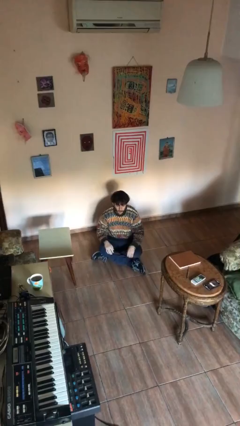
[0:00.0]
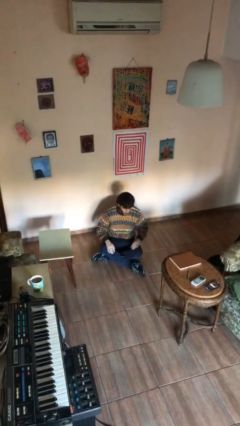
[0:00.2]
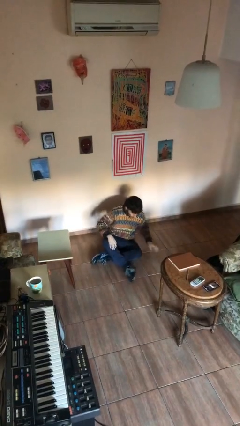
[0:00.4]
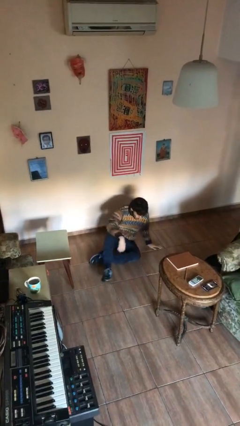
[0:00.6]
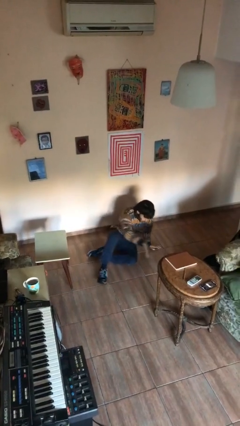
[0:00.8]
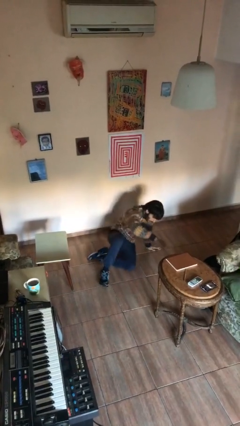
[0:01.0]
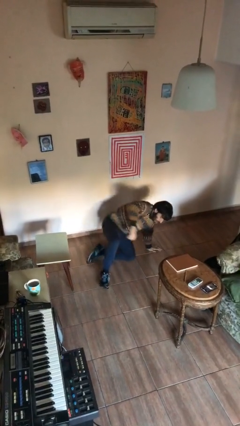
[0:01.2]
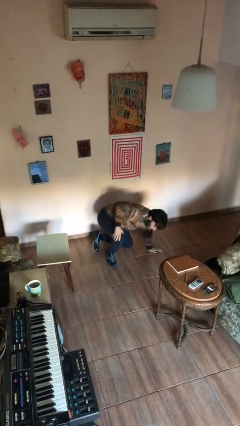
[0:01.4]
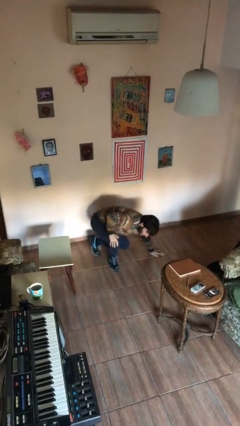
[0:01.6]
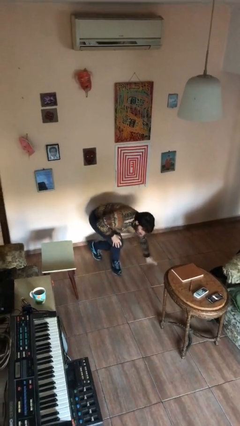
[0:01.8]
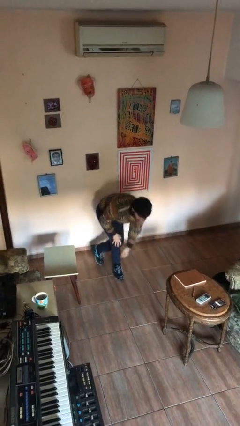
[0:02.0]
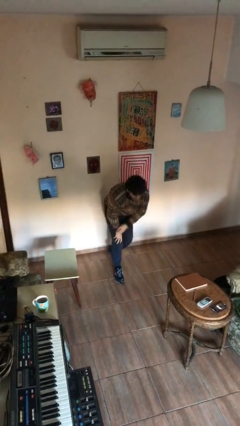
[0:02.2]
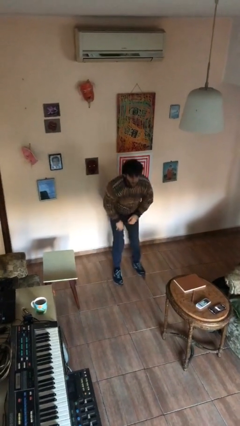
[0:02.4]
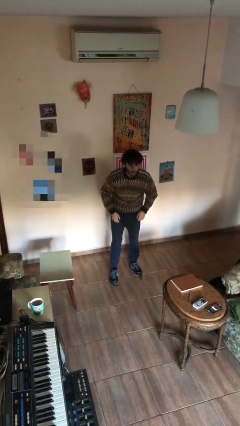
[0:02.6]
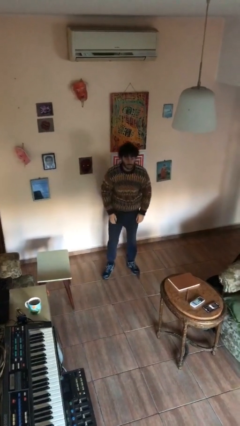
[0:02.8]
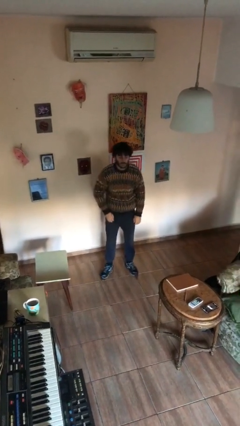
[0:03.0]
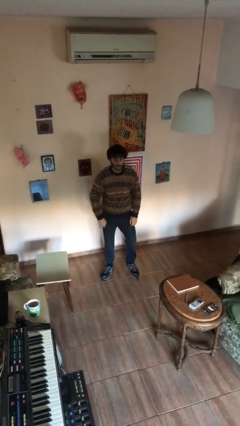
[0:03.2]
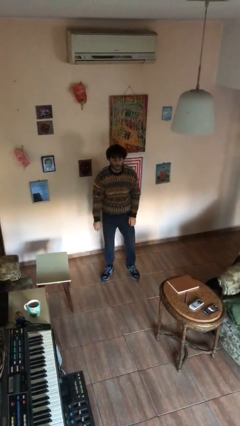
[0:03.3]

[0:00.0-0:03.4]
person stands up from floor

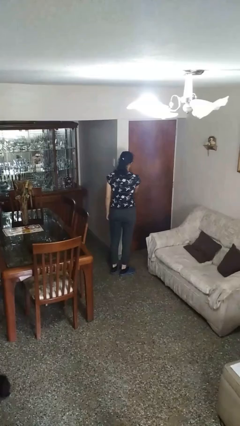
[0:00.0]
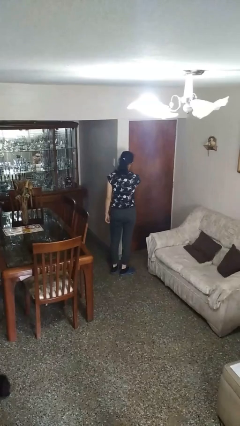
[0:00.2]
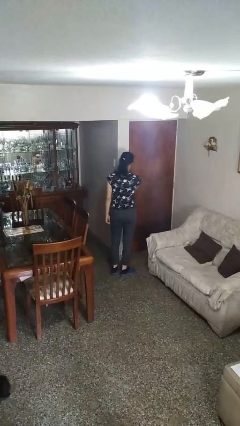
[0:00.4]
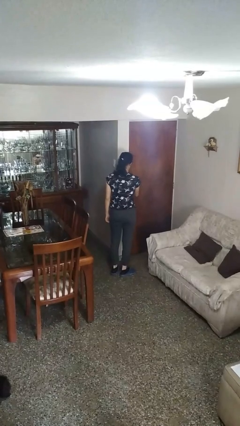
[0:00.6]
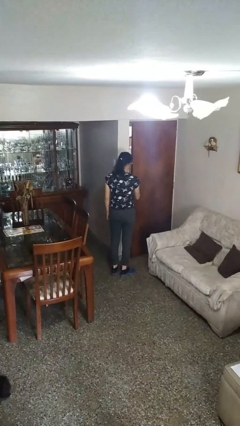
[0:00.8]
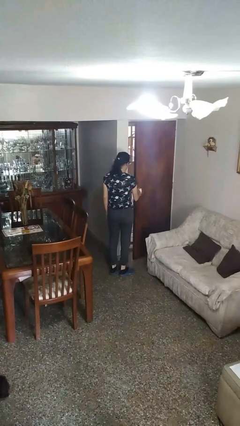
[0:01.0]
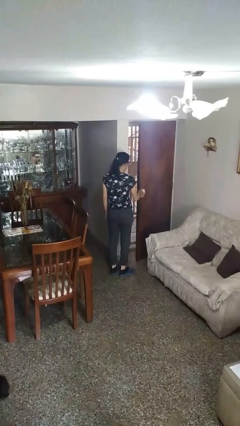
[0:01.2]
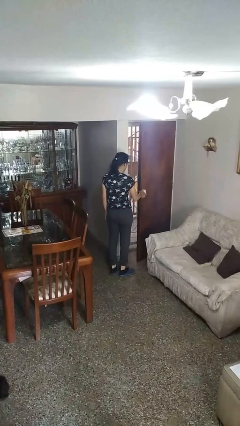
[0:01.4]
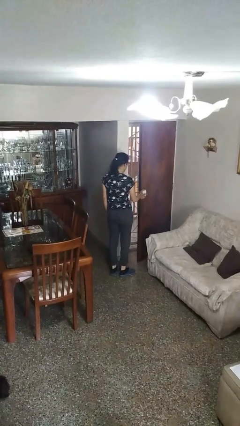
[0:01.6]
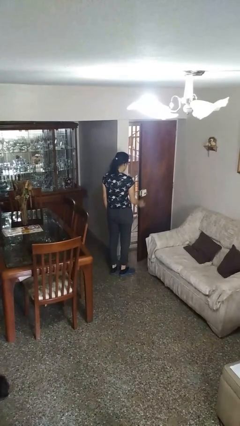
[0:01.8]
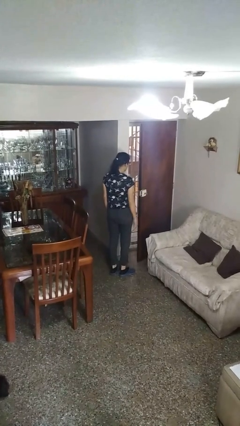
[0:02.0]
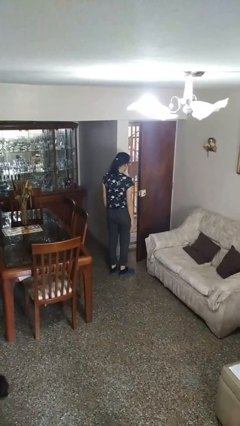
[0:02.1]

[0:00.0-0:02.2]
person opens facility door

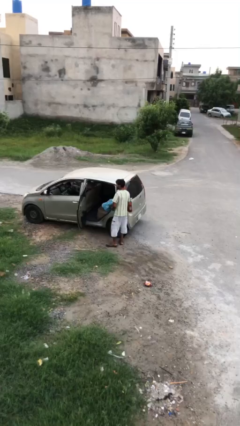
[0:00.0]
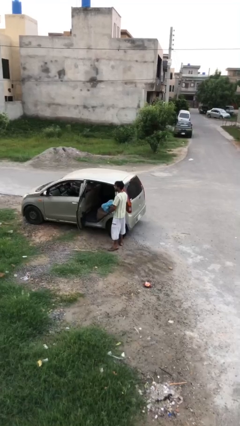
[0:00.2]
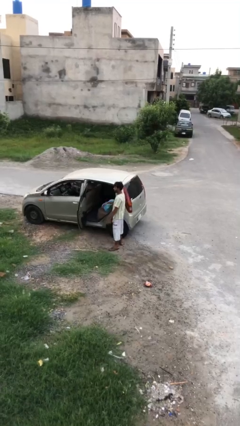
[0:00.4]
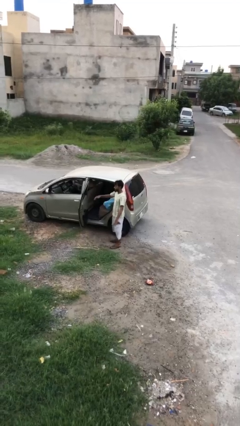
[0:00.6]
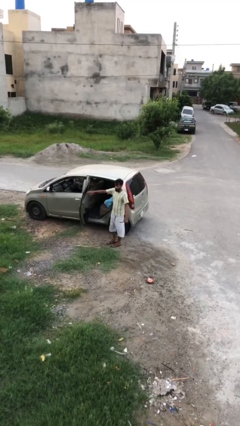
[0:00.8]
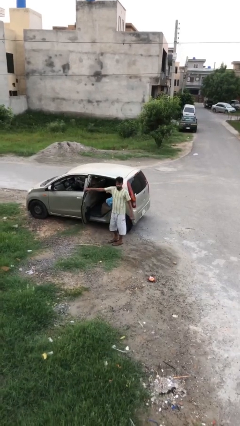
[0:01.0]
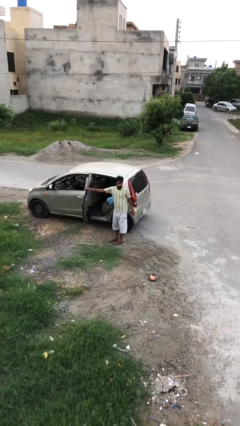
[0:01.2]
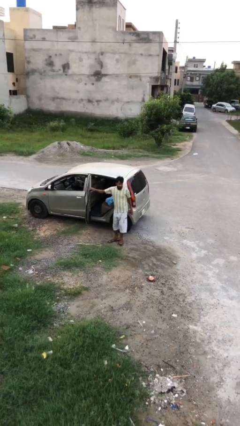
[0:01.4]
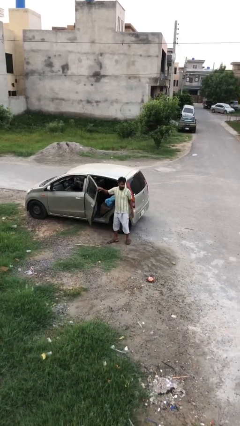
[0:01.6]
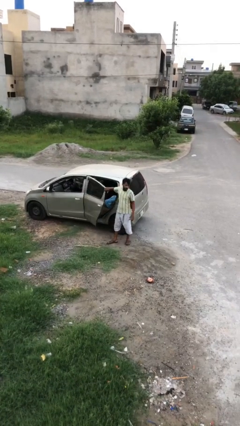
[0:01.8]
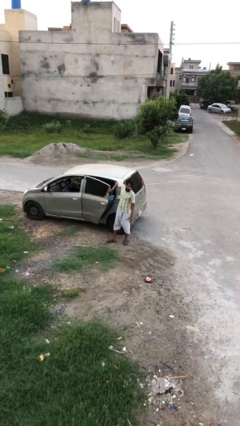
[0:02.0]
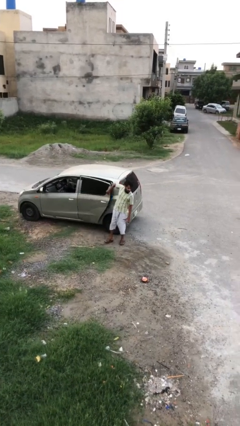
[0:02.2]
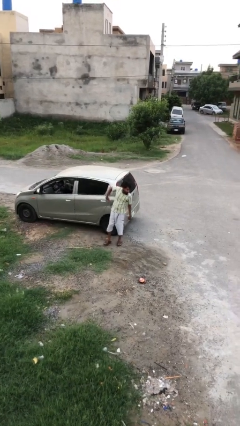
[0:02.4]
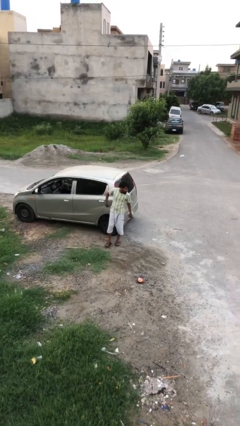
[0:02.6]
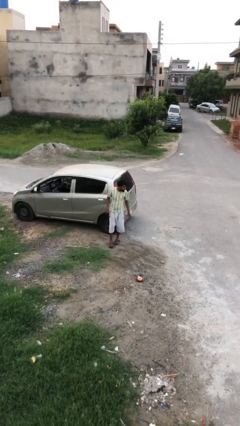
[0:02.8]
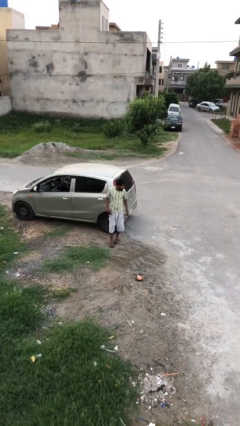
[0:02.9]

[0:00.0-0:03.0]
person closes car door

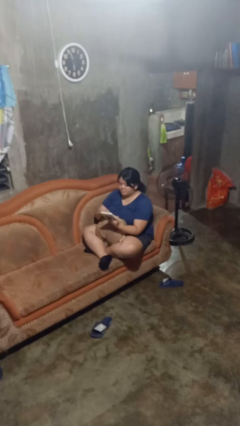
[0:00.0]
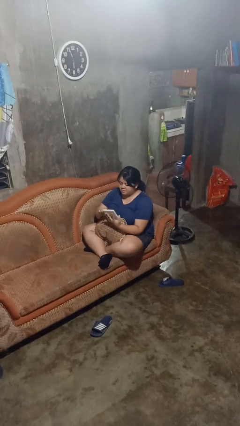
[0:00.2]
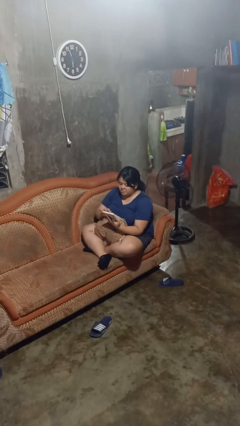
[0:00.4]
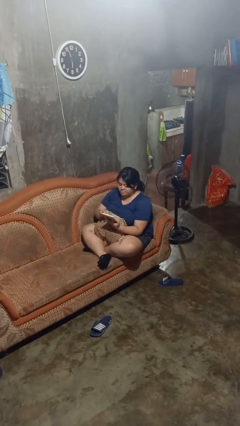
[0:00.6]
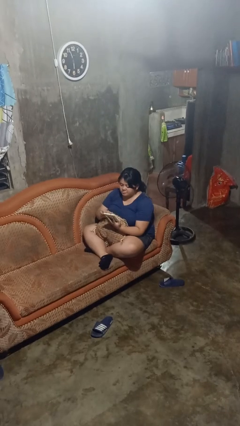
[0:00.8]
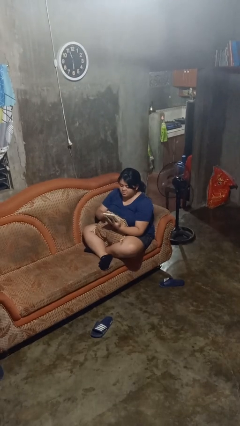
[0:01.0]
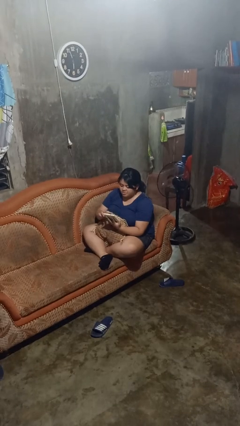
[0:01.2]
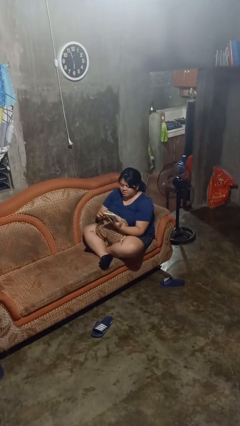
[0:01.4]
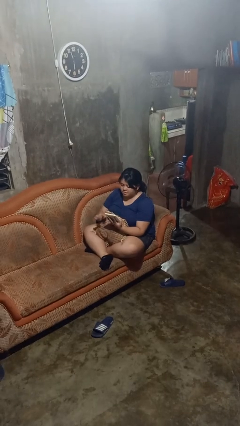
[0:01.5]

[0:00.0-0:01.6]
person interacts with tablet

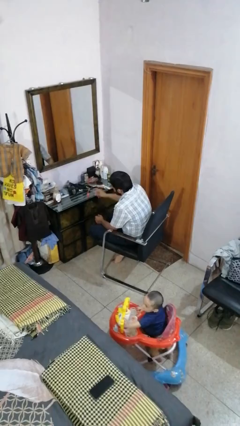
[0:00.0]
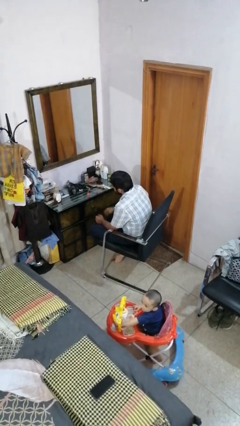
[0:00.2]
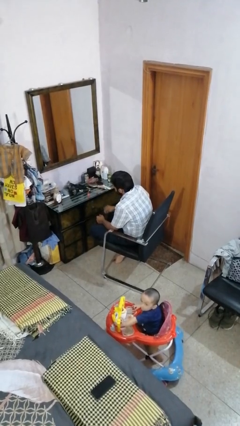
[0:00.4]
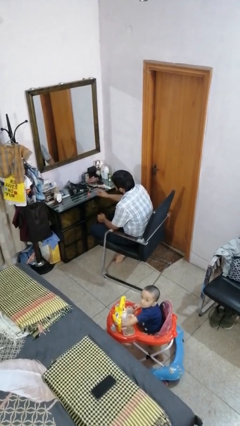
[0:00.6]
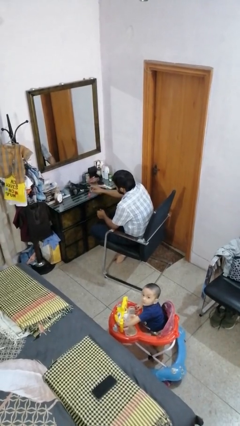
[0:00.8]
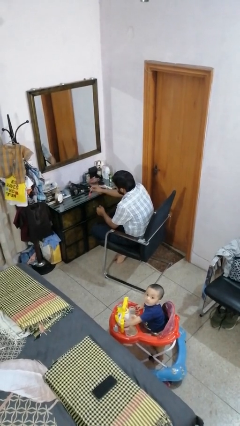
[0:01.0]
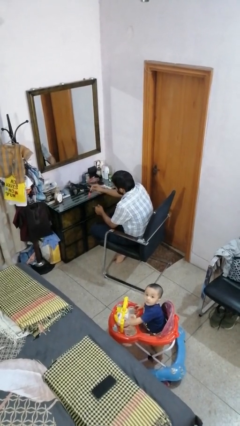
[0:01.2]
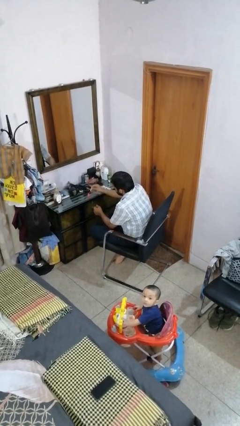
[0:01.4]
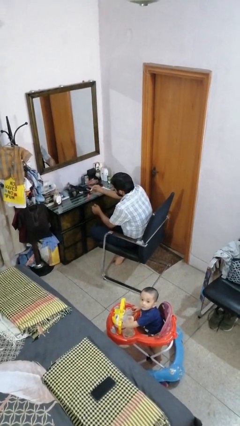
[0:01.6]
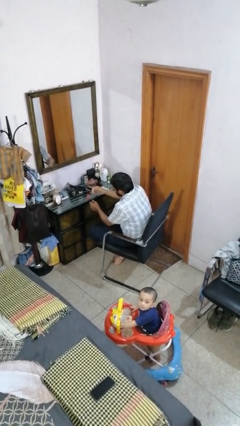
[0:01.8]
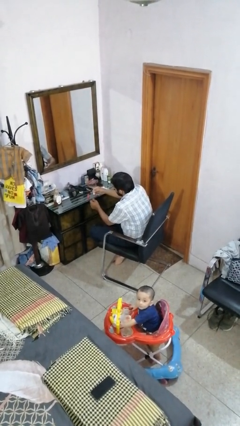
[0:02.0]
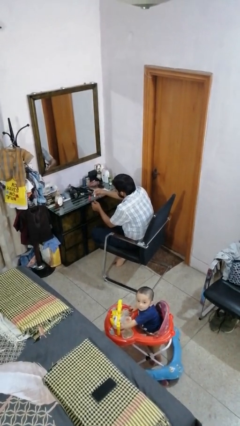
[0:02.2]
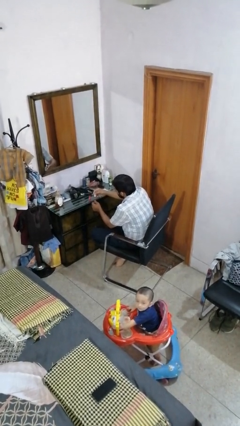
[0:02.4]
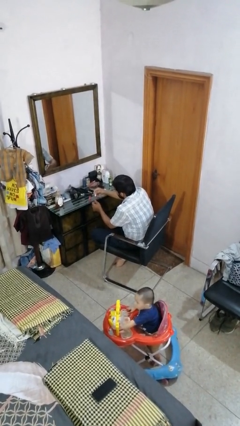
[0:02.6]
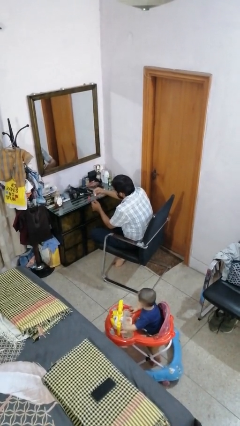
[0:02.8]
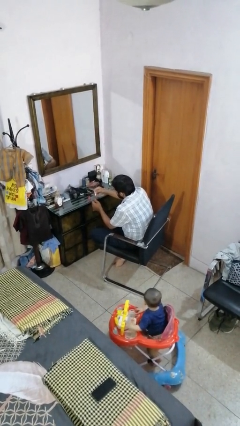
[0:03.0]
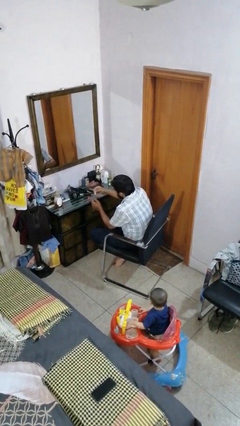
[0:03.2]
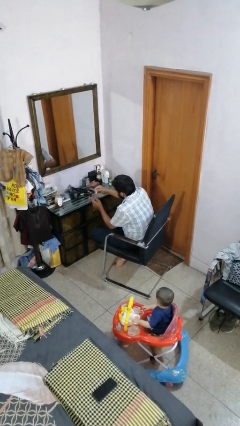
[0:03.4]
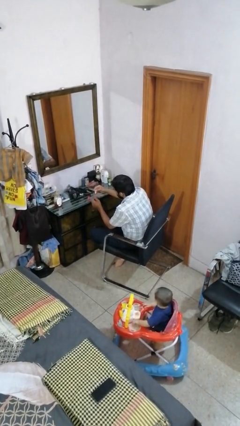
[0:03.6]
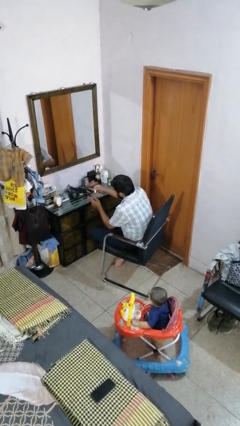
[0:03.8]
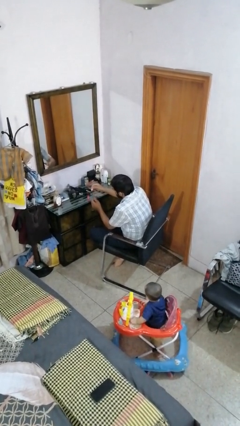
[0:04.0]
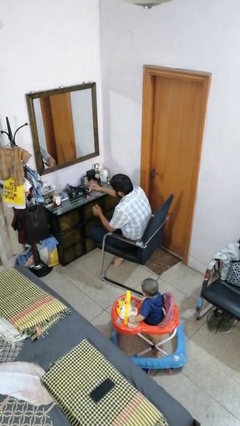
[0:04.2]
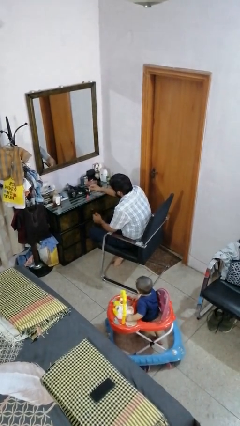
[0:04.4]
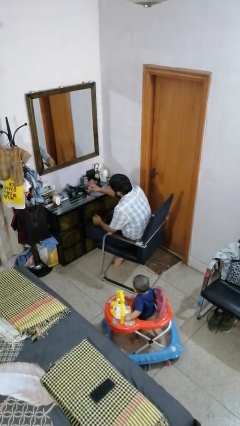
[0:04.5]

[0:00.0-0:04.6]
person paints fingernails

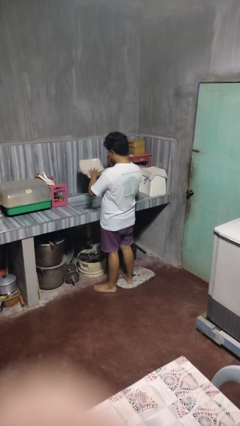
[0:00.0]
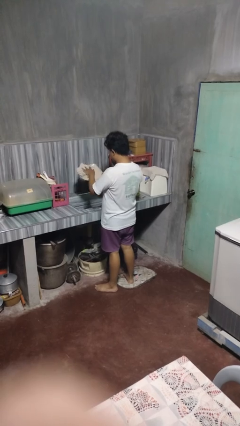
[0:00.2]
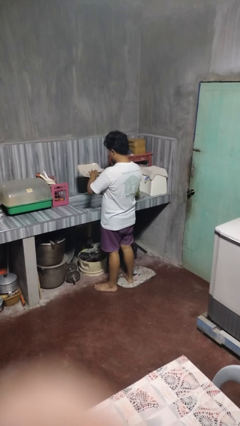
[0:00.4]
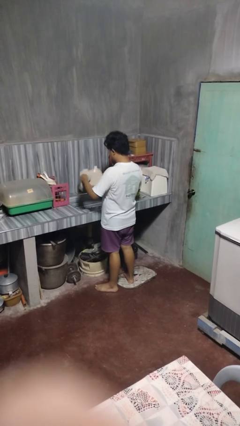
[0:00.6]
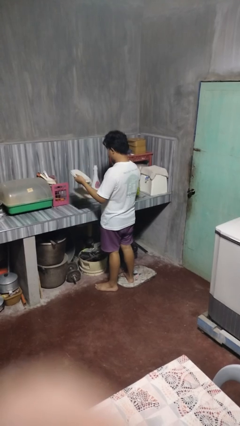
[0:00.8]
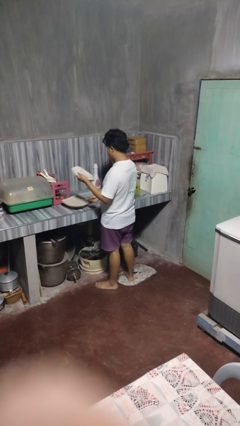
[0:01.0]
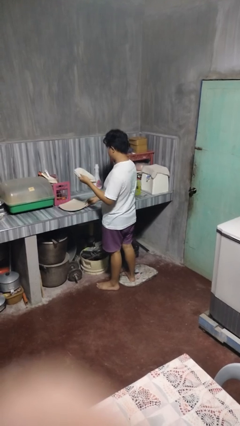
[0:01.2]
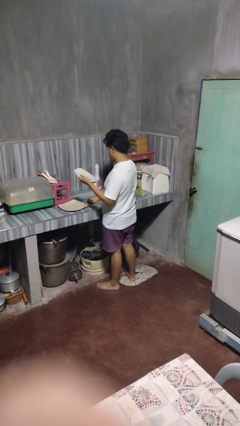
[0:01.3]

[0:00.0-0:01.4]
person dries dish

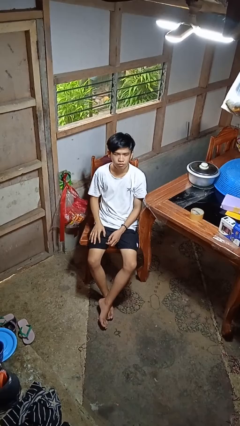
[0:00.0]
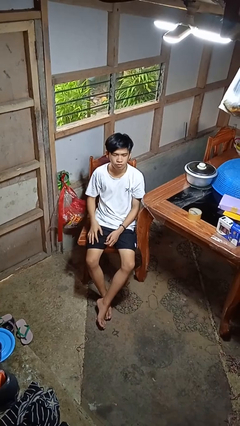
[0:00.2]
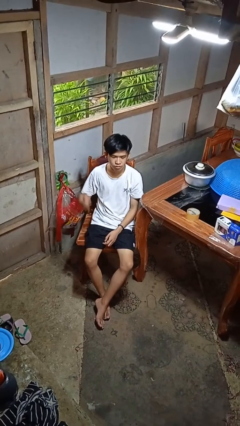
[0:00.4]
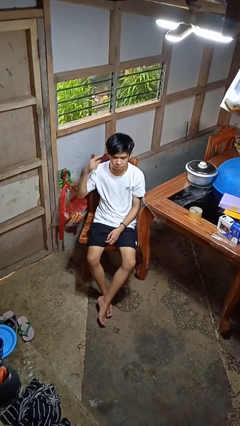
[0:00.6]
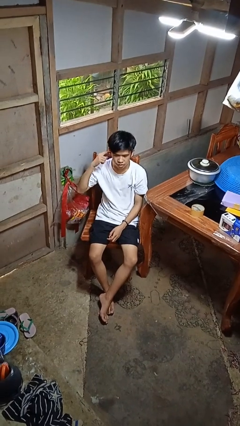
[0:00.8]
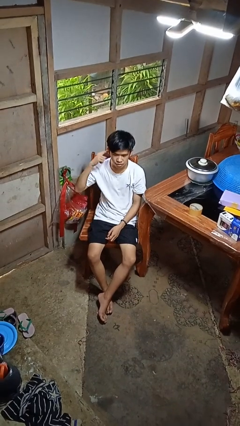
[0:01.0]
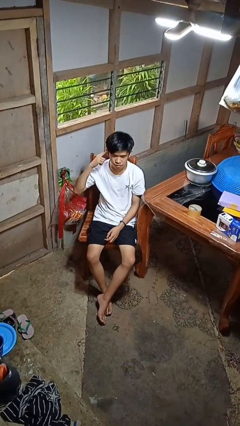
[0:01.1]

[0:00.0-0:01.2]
person gestures listen closely
